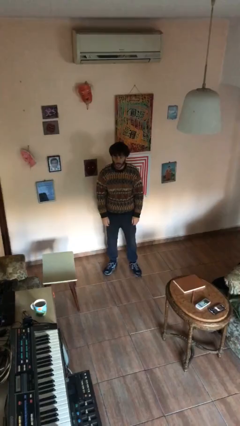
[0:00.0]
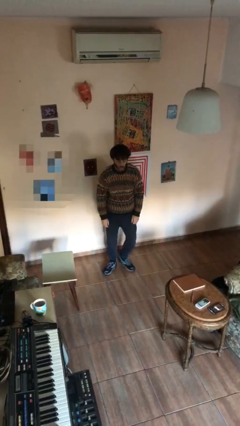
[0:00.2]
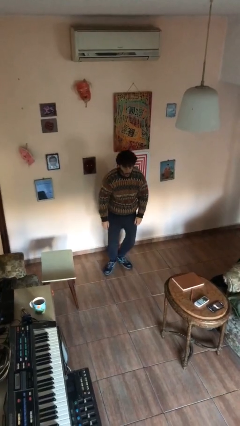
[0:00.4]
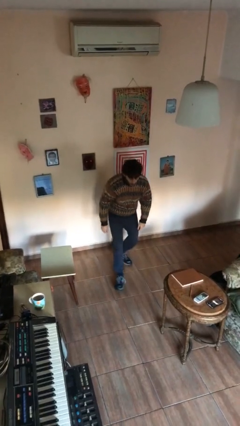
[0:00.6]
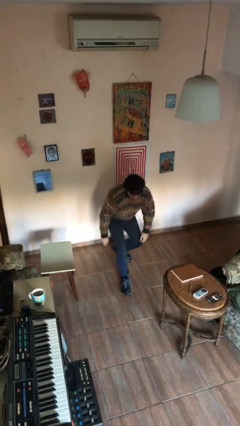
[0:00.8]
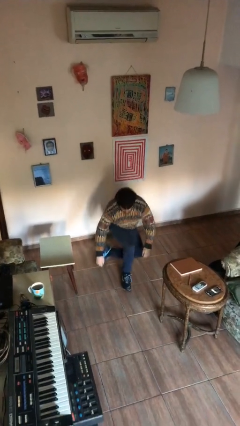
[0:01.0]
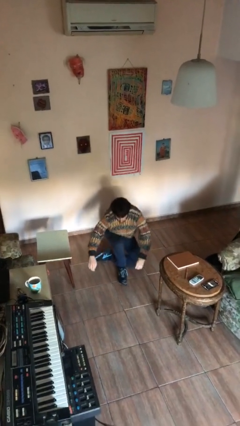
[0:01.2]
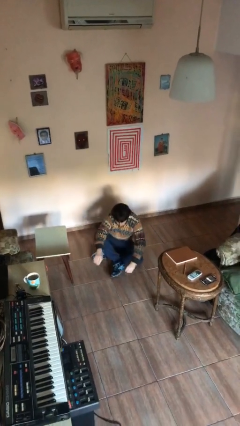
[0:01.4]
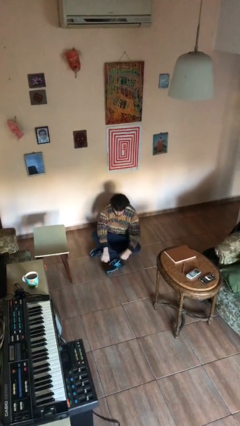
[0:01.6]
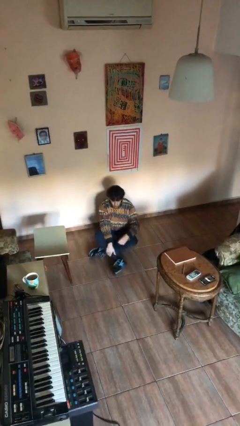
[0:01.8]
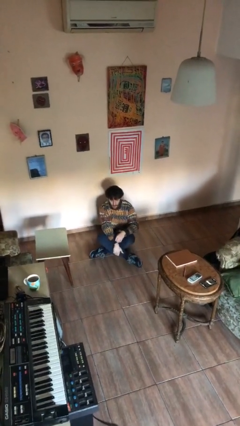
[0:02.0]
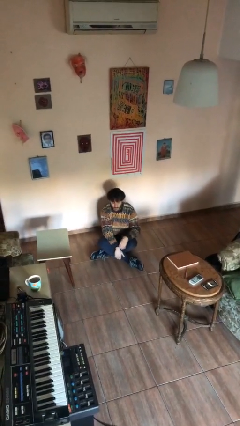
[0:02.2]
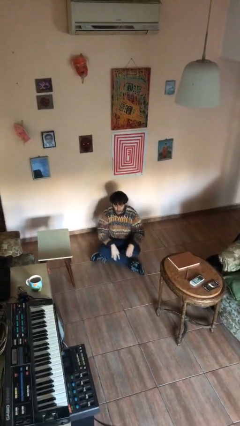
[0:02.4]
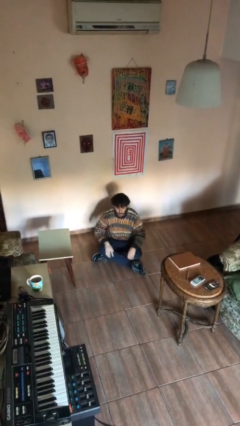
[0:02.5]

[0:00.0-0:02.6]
person sits crisscross

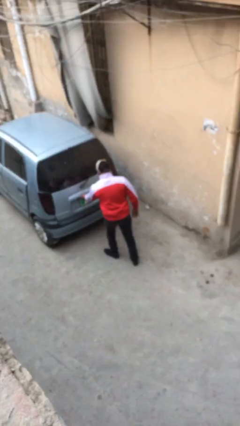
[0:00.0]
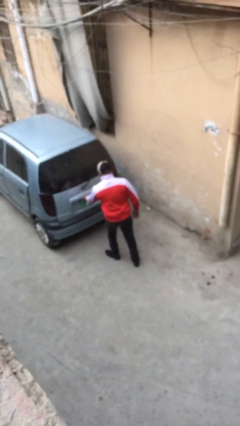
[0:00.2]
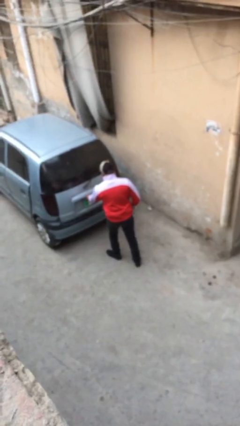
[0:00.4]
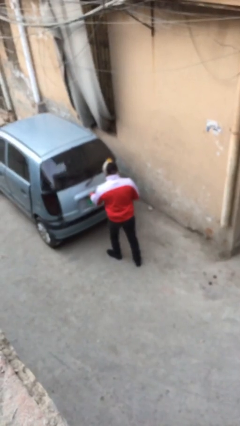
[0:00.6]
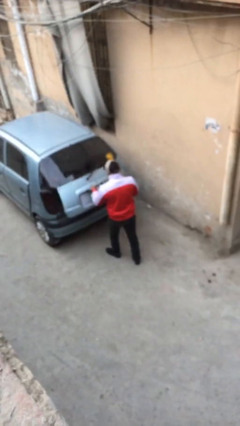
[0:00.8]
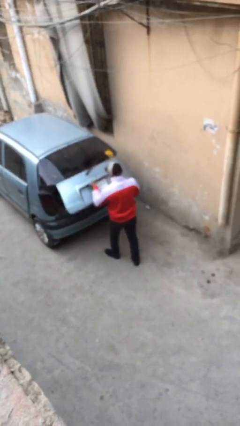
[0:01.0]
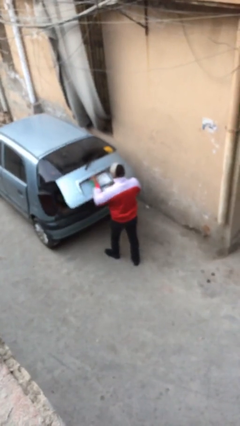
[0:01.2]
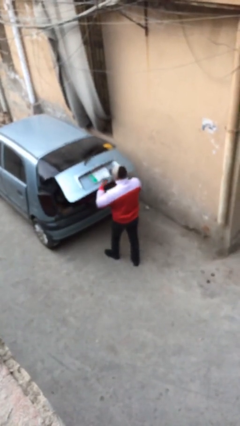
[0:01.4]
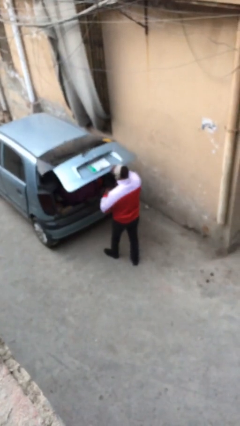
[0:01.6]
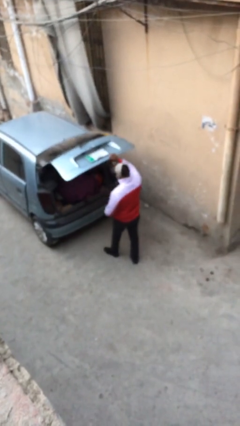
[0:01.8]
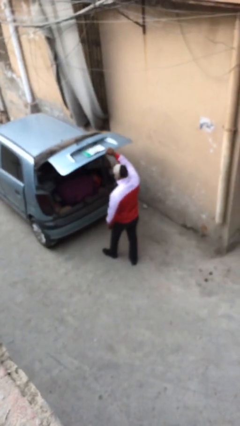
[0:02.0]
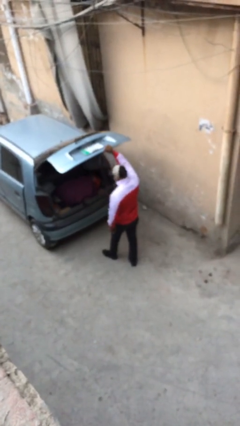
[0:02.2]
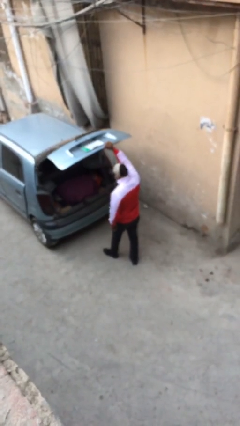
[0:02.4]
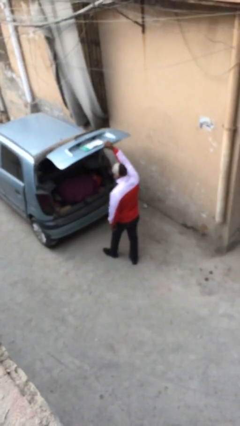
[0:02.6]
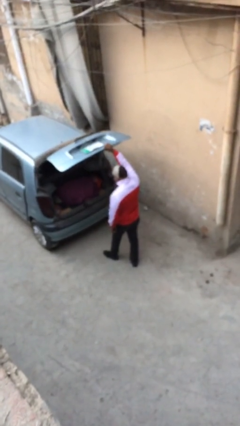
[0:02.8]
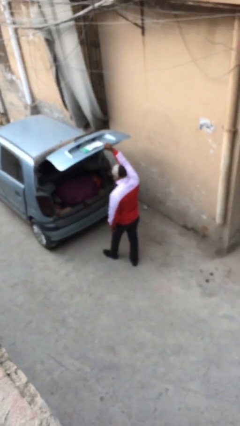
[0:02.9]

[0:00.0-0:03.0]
person opens car trunk

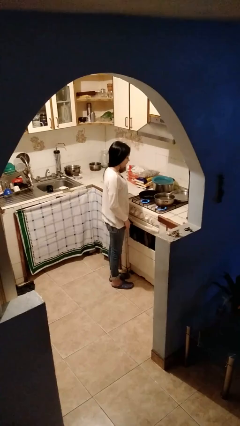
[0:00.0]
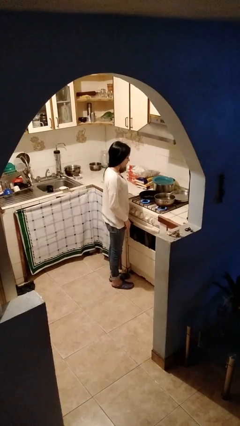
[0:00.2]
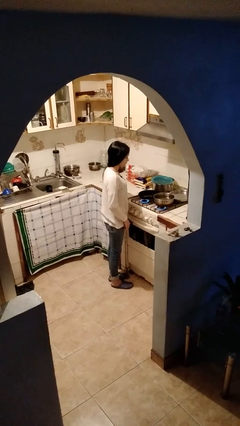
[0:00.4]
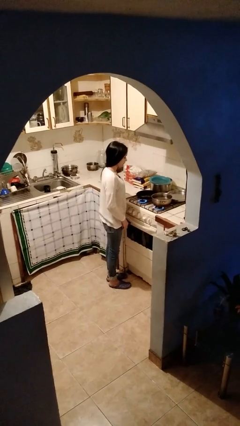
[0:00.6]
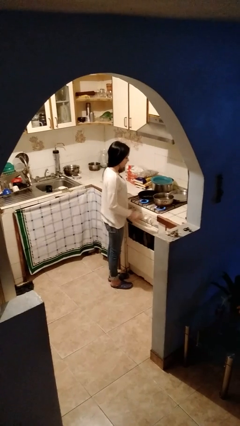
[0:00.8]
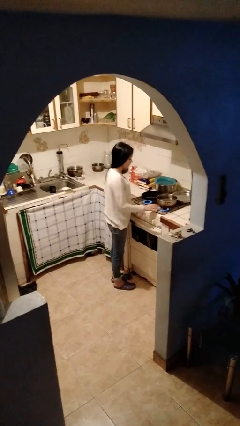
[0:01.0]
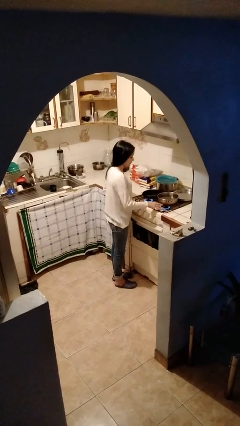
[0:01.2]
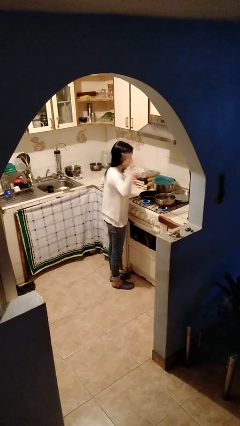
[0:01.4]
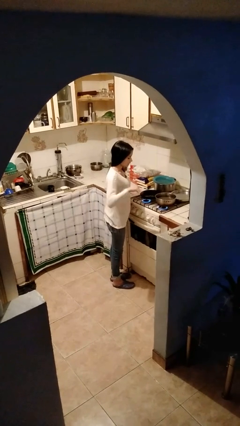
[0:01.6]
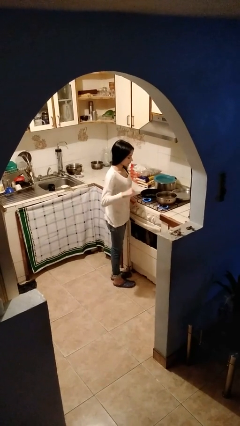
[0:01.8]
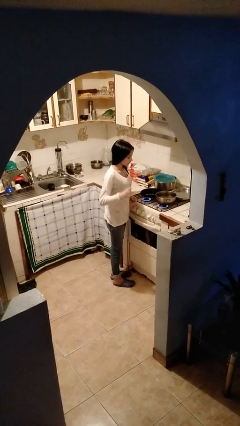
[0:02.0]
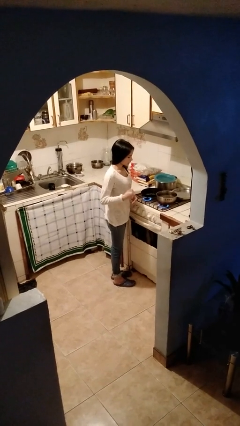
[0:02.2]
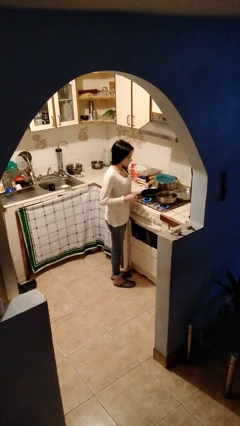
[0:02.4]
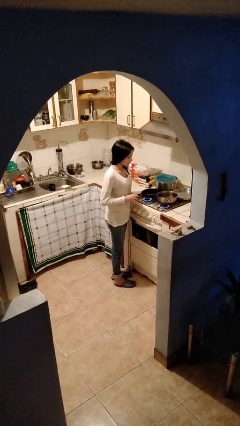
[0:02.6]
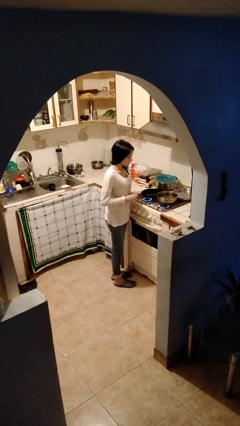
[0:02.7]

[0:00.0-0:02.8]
person burns hand

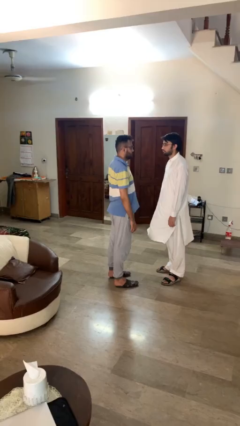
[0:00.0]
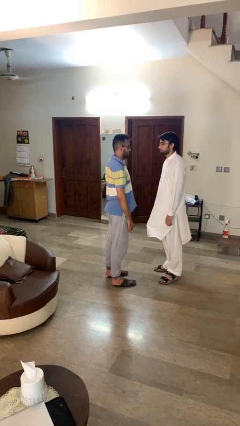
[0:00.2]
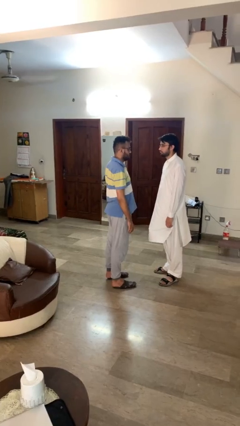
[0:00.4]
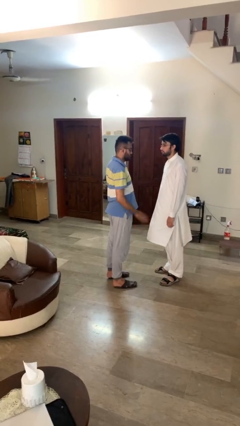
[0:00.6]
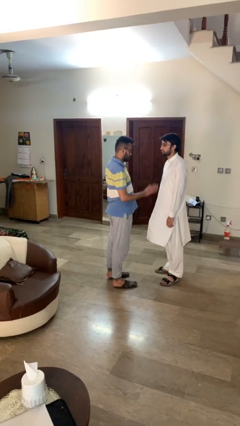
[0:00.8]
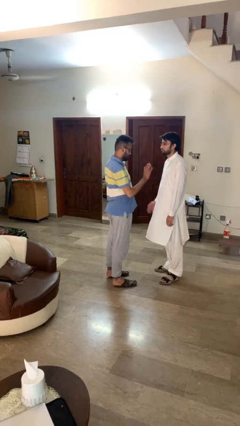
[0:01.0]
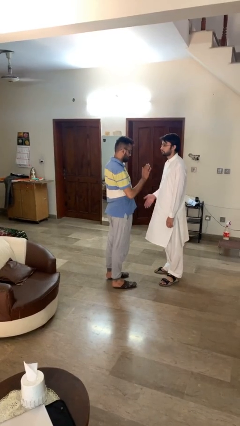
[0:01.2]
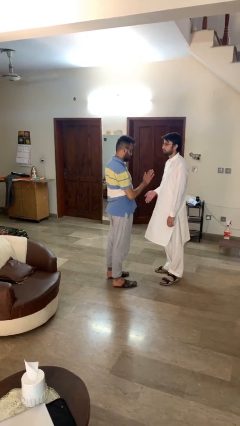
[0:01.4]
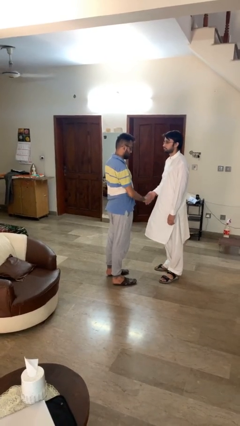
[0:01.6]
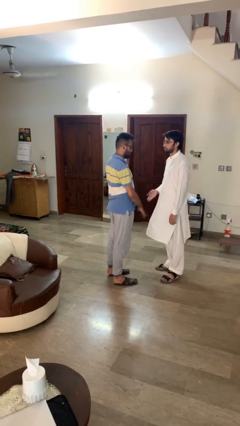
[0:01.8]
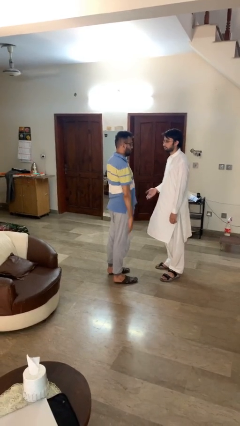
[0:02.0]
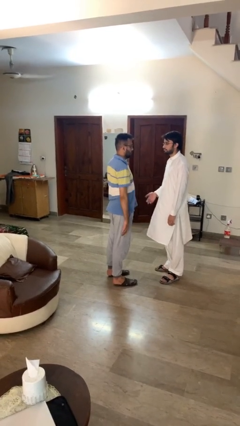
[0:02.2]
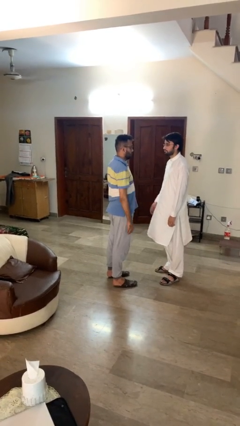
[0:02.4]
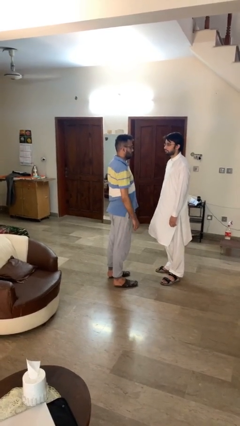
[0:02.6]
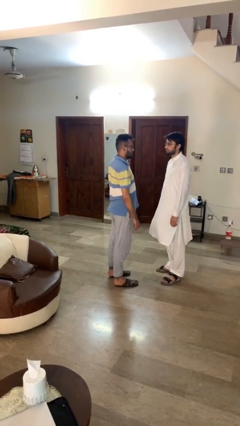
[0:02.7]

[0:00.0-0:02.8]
person highfives hand

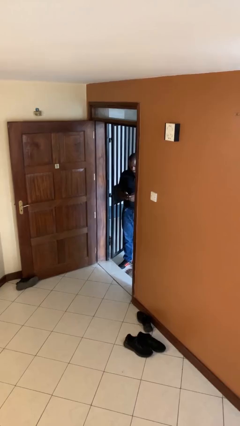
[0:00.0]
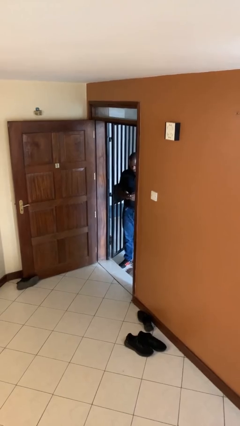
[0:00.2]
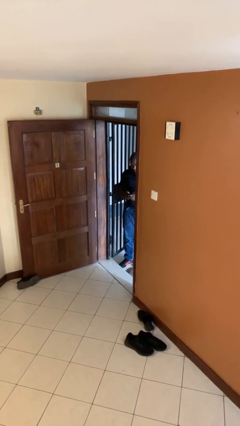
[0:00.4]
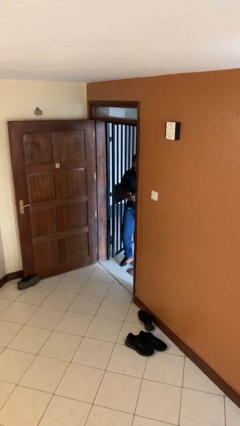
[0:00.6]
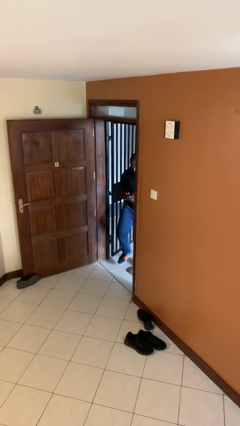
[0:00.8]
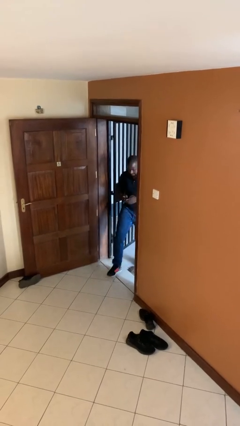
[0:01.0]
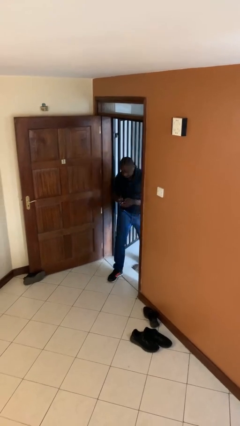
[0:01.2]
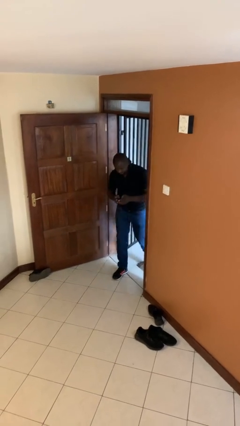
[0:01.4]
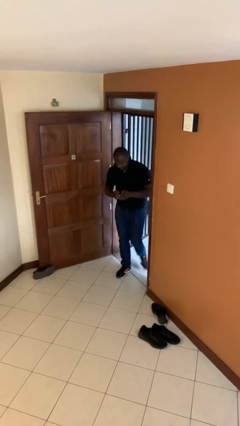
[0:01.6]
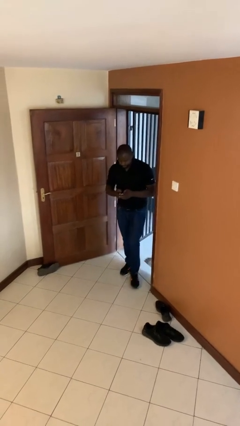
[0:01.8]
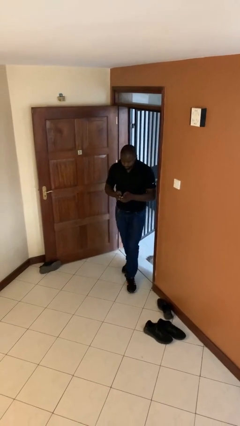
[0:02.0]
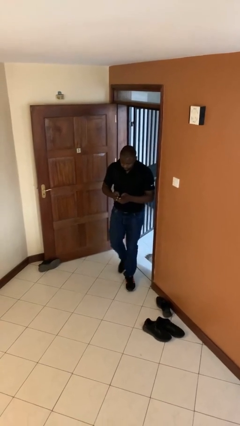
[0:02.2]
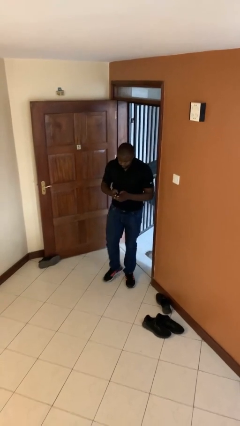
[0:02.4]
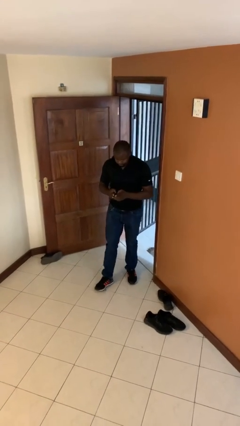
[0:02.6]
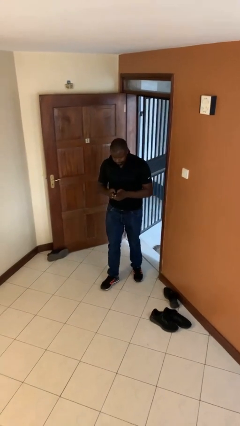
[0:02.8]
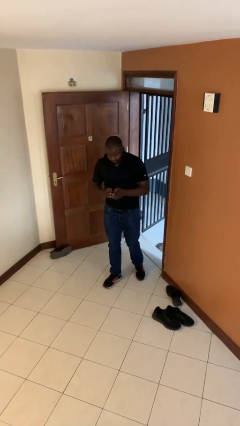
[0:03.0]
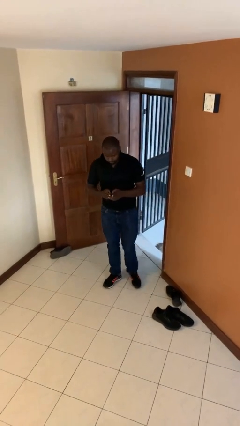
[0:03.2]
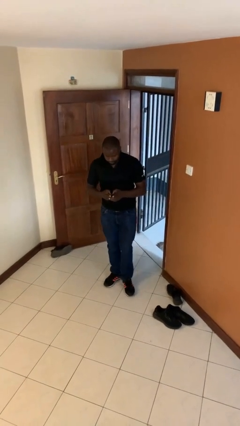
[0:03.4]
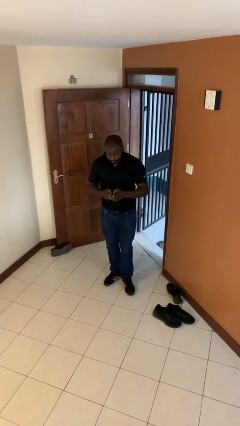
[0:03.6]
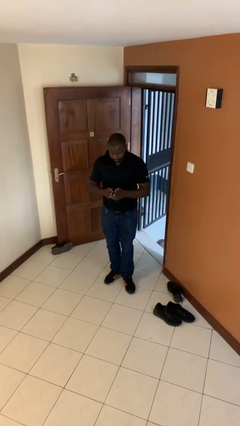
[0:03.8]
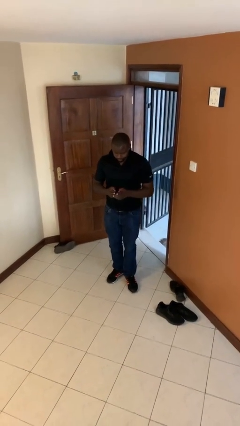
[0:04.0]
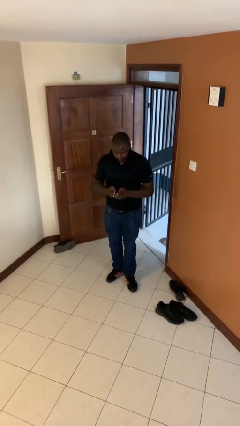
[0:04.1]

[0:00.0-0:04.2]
person enters scene through structure

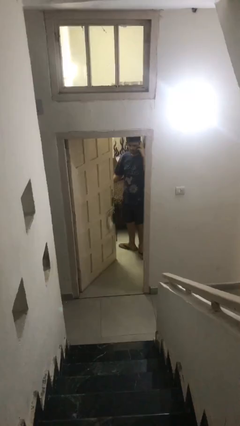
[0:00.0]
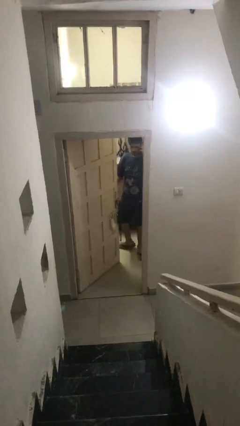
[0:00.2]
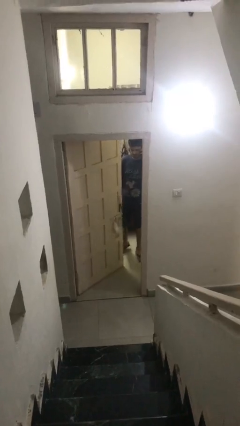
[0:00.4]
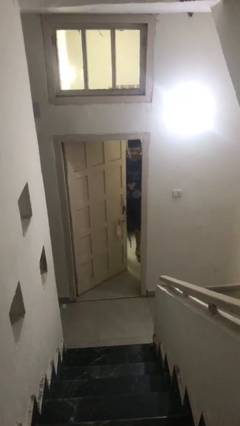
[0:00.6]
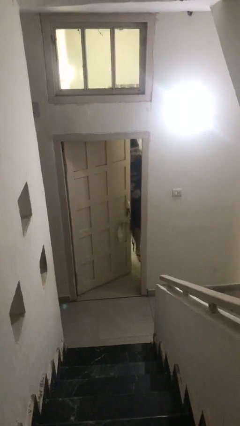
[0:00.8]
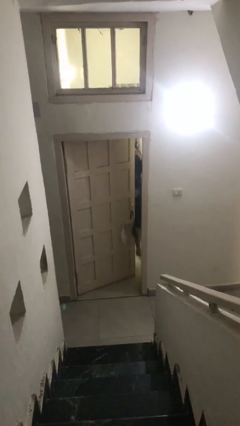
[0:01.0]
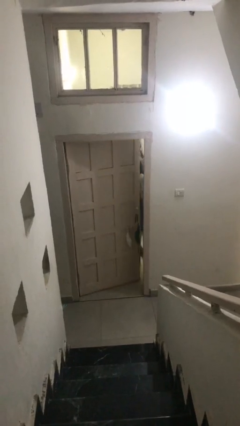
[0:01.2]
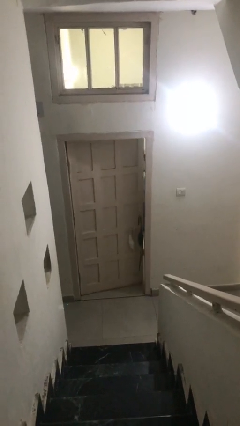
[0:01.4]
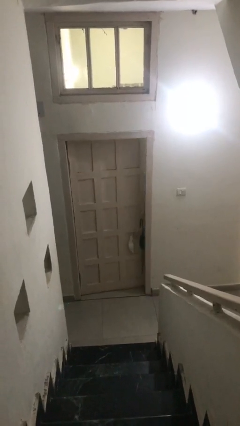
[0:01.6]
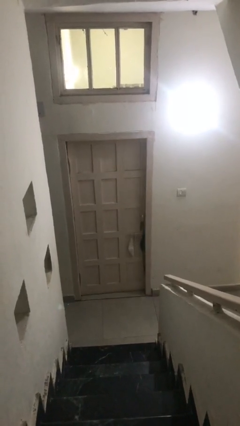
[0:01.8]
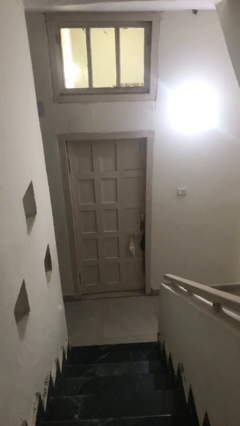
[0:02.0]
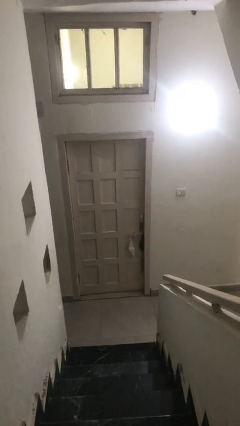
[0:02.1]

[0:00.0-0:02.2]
person closes facility door
